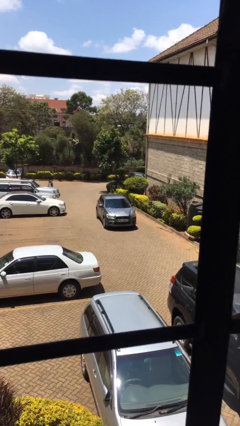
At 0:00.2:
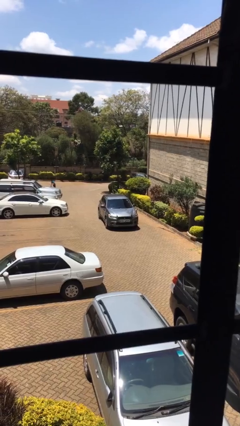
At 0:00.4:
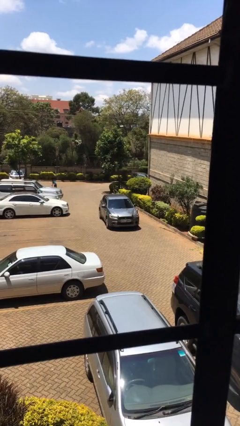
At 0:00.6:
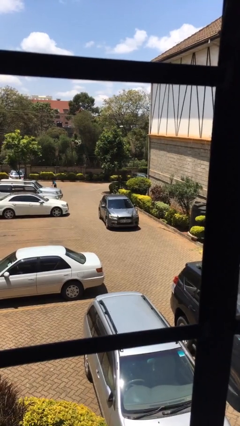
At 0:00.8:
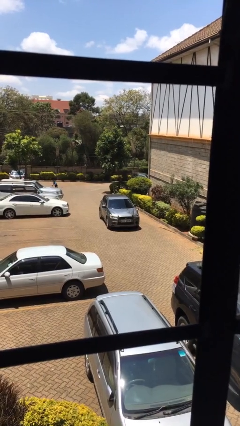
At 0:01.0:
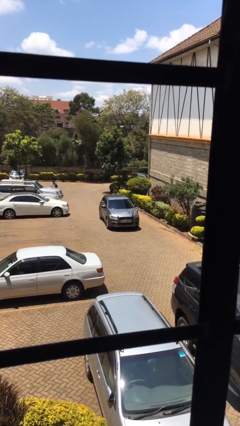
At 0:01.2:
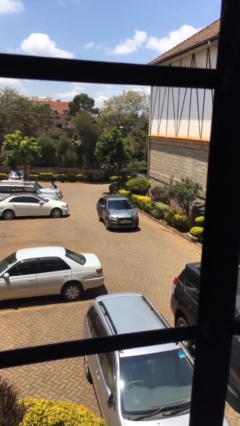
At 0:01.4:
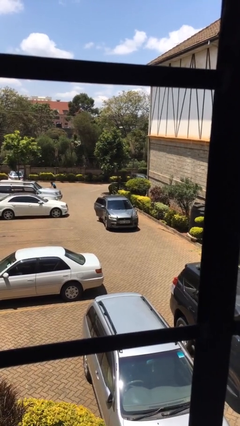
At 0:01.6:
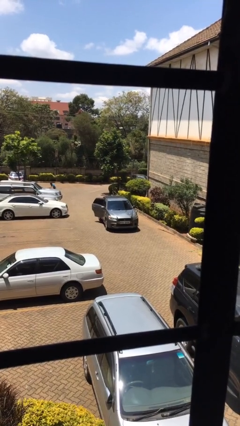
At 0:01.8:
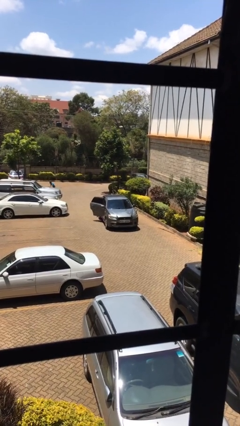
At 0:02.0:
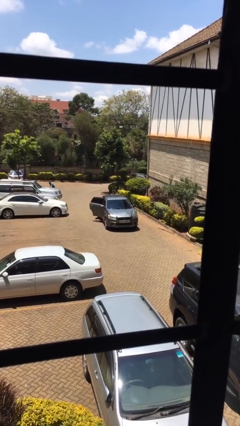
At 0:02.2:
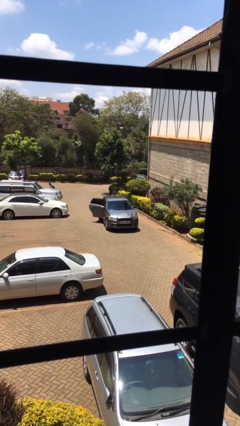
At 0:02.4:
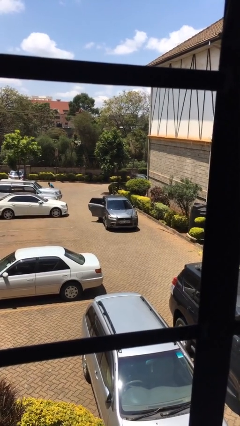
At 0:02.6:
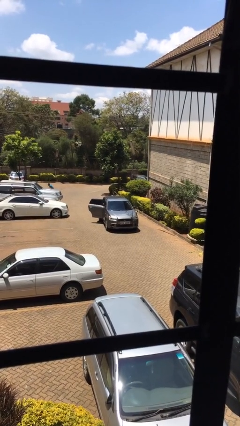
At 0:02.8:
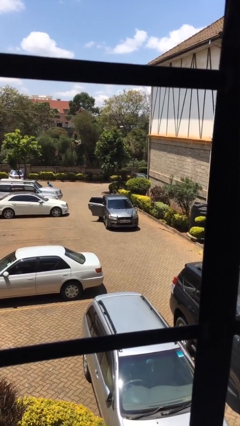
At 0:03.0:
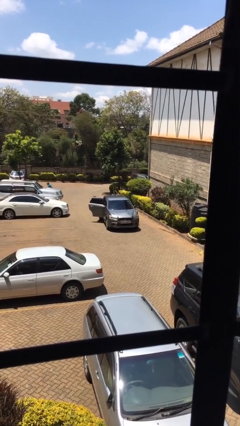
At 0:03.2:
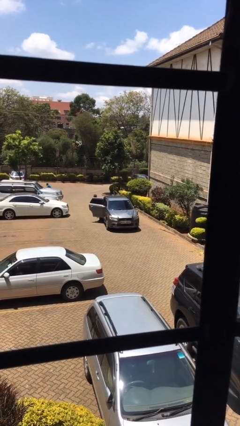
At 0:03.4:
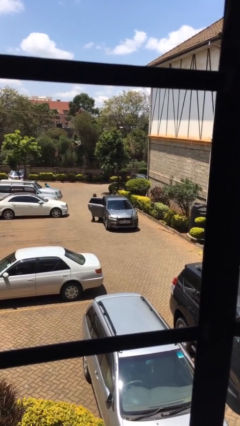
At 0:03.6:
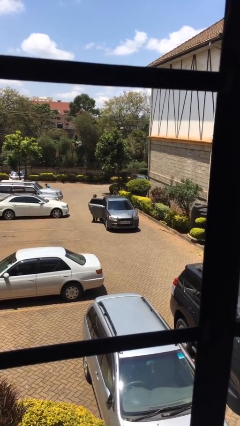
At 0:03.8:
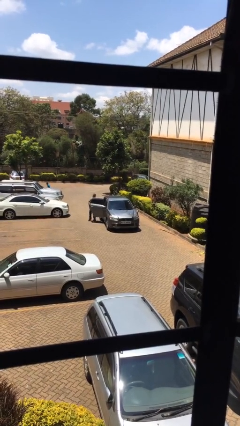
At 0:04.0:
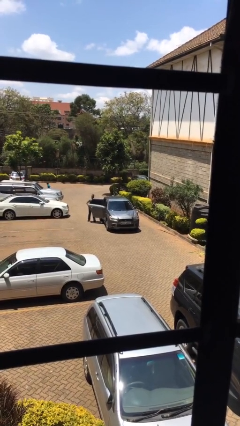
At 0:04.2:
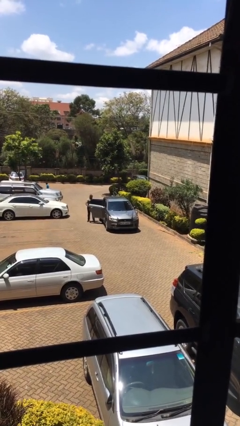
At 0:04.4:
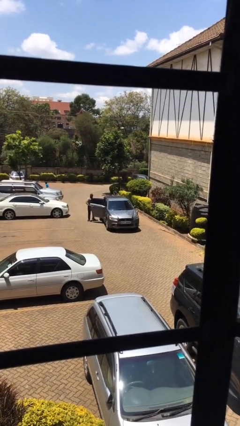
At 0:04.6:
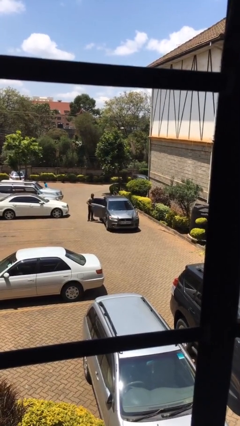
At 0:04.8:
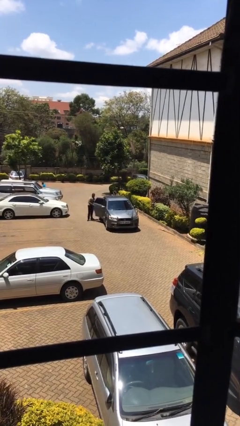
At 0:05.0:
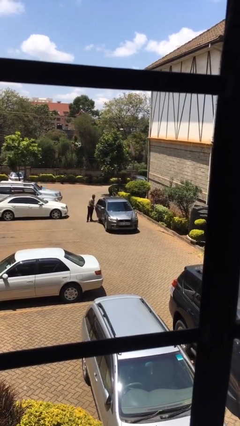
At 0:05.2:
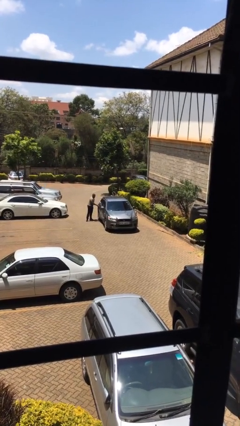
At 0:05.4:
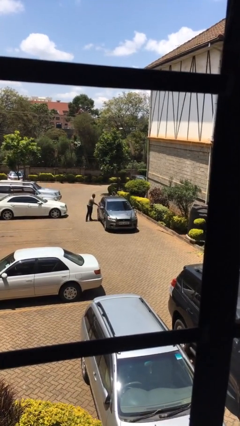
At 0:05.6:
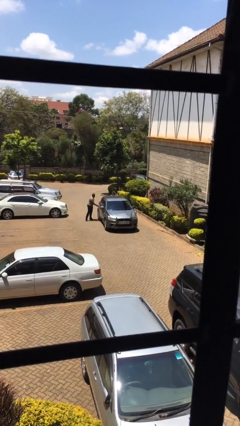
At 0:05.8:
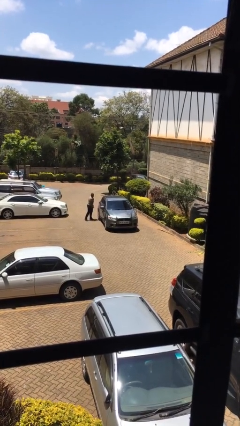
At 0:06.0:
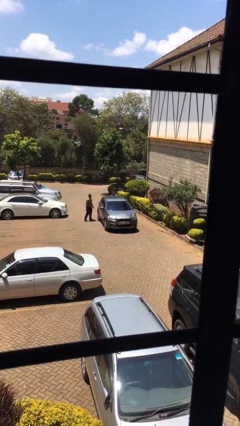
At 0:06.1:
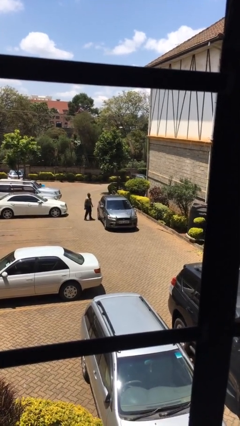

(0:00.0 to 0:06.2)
car drops off person

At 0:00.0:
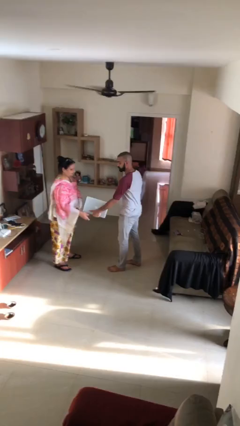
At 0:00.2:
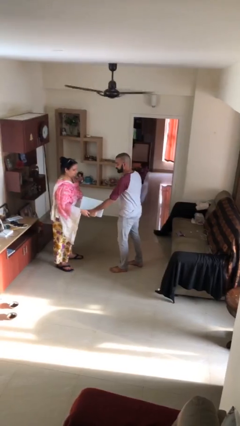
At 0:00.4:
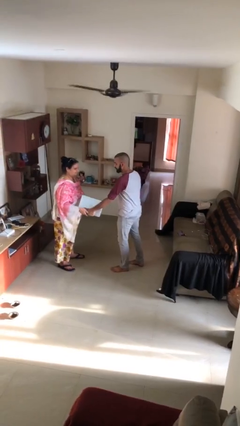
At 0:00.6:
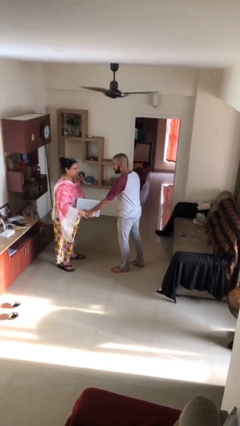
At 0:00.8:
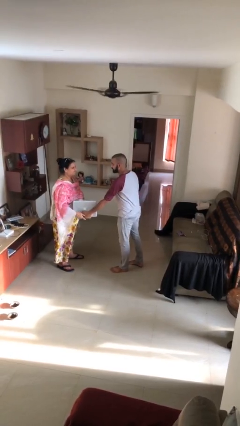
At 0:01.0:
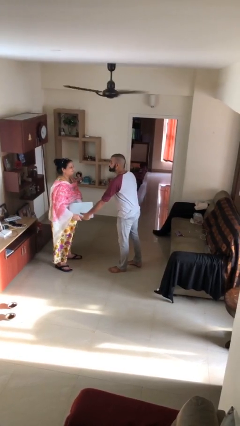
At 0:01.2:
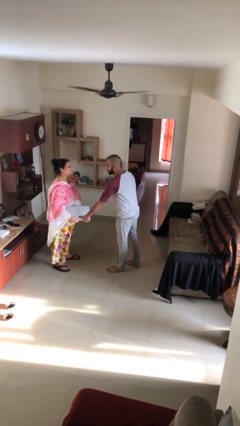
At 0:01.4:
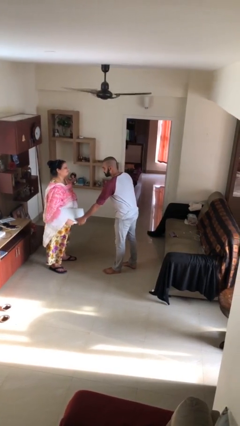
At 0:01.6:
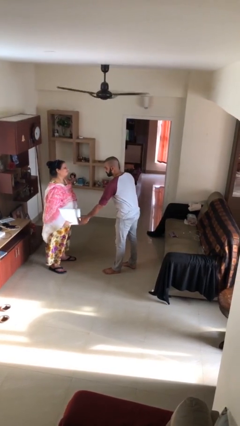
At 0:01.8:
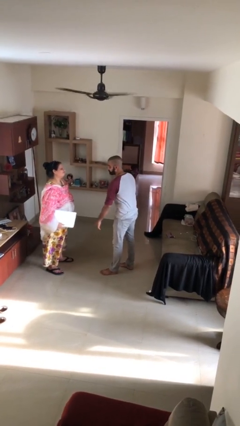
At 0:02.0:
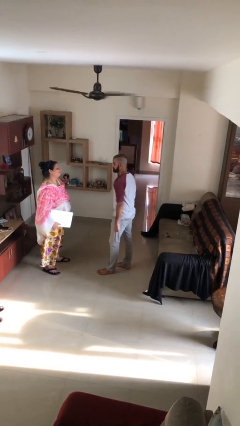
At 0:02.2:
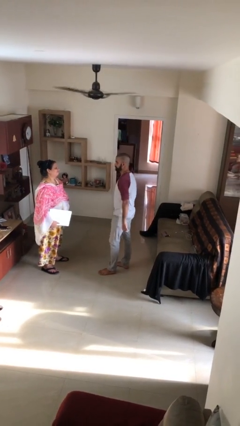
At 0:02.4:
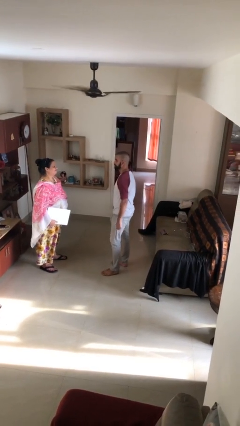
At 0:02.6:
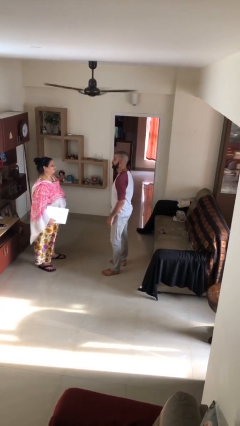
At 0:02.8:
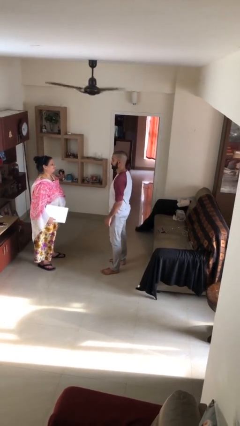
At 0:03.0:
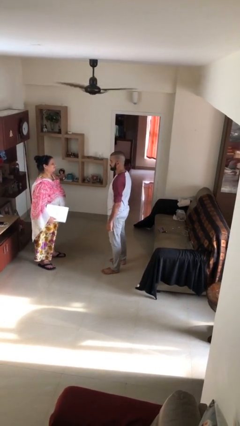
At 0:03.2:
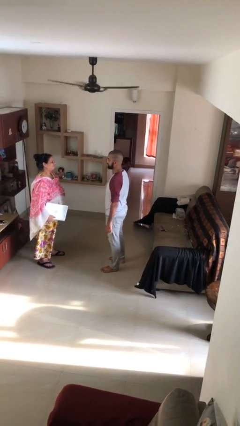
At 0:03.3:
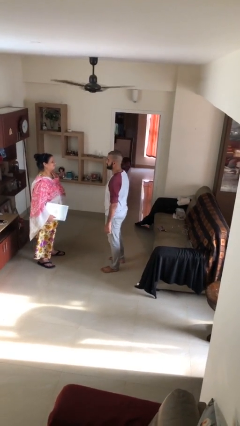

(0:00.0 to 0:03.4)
person transfers object to person

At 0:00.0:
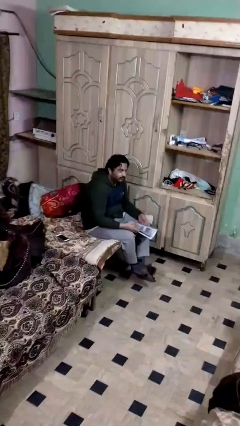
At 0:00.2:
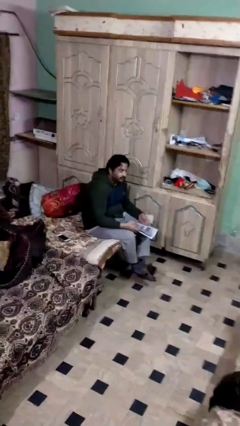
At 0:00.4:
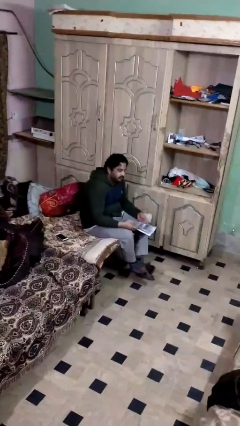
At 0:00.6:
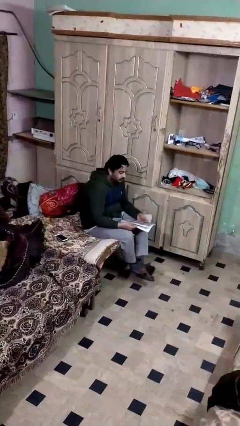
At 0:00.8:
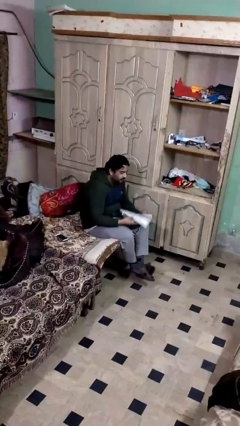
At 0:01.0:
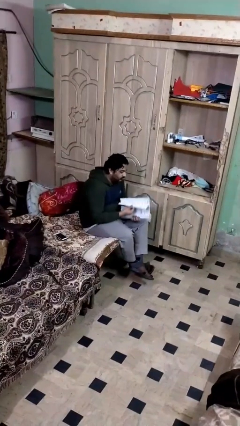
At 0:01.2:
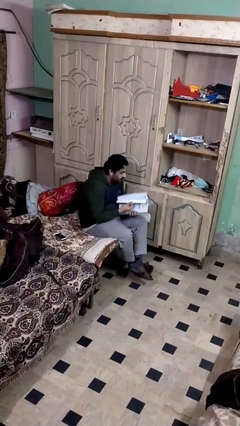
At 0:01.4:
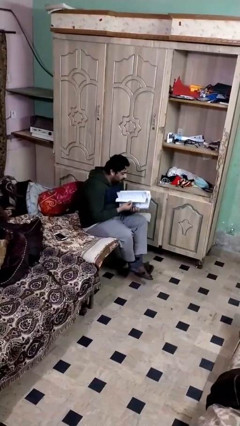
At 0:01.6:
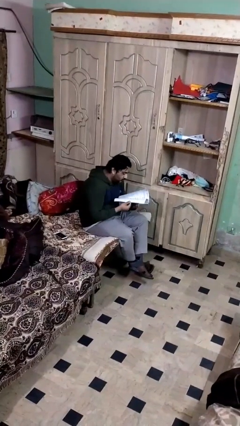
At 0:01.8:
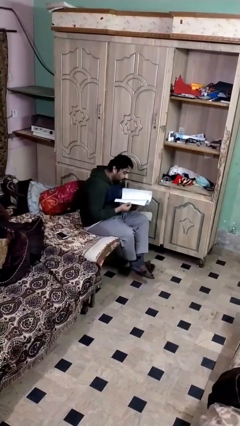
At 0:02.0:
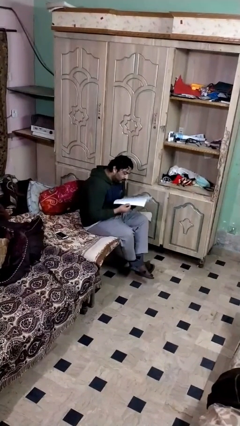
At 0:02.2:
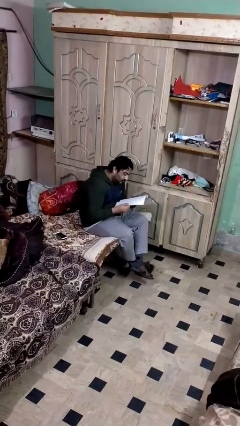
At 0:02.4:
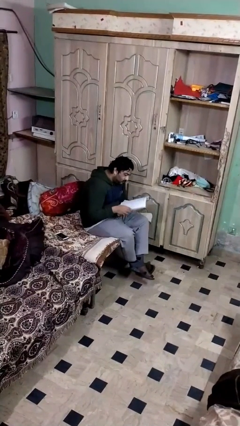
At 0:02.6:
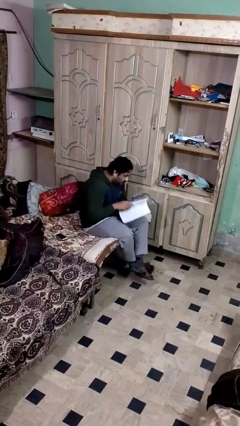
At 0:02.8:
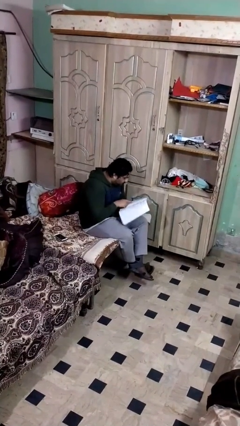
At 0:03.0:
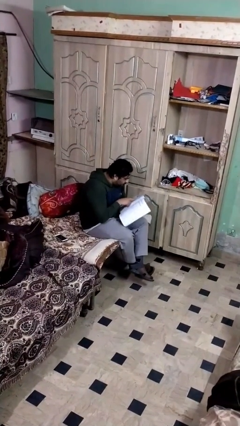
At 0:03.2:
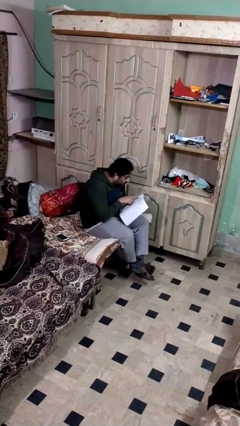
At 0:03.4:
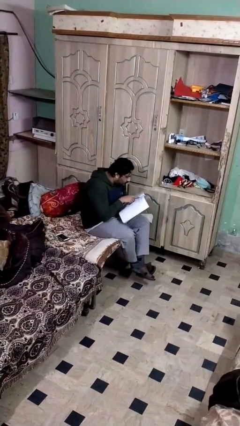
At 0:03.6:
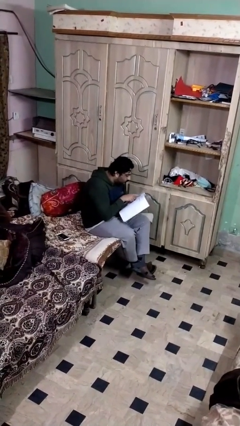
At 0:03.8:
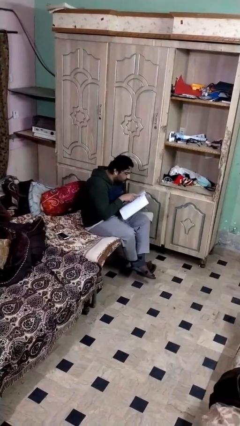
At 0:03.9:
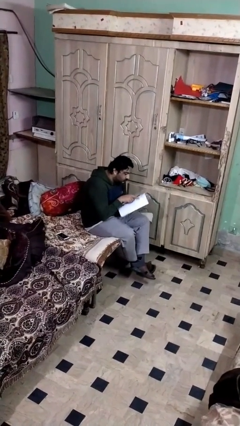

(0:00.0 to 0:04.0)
person reads document

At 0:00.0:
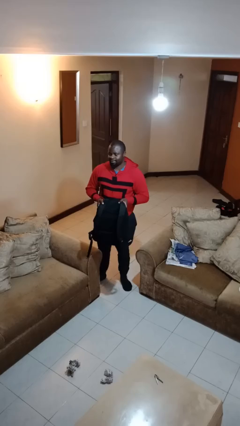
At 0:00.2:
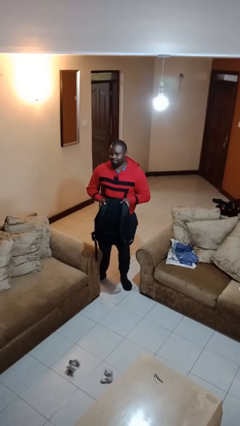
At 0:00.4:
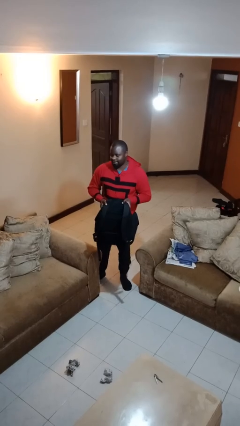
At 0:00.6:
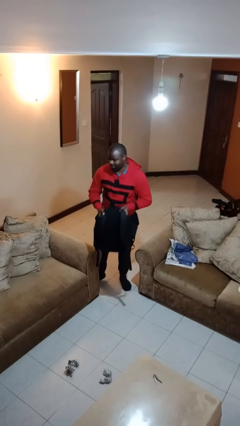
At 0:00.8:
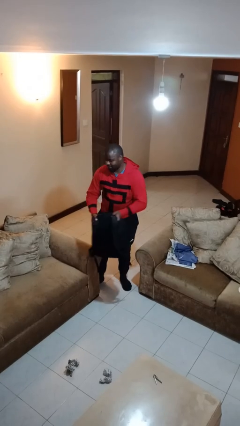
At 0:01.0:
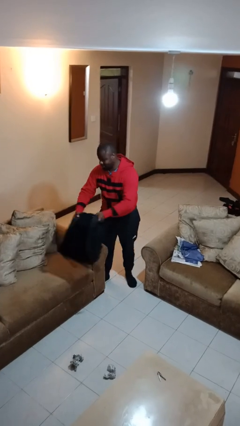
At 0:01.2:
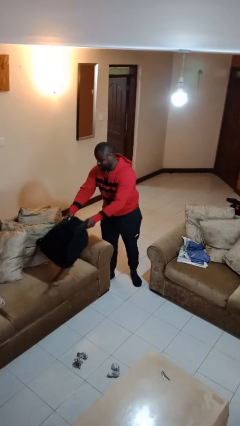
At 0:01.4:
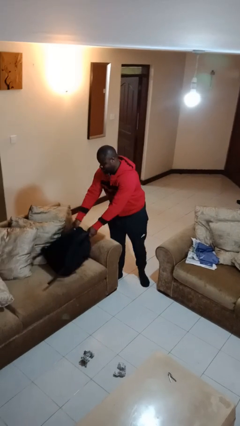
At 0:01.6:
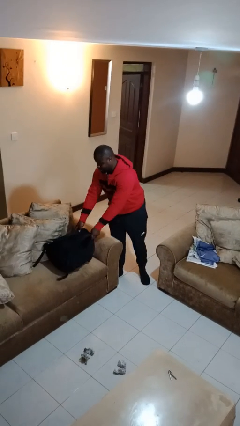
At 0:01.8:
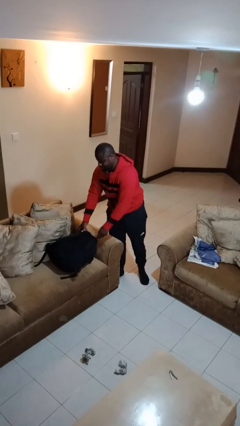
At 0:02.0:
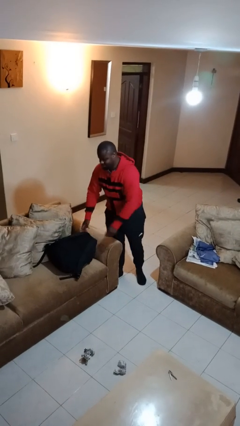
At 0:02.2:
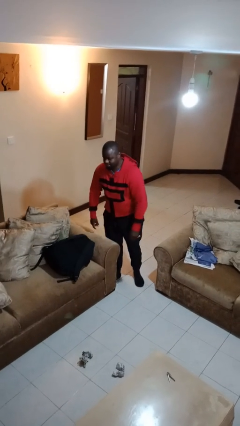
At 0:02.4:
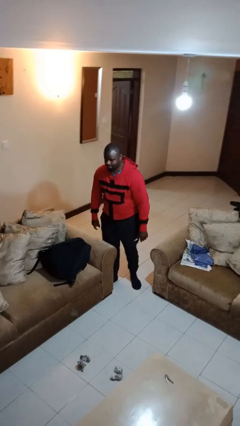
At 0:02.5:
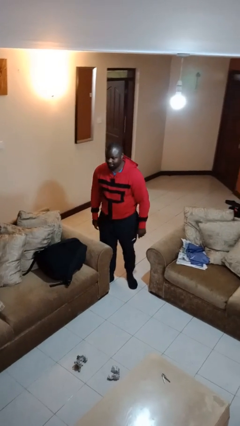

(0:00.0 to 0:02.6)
person puts down object on couch

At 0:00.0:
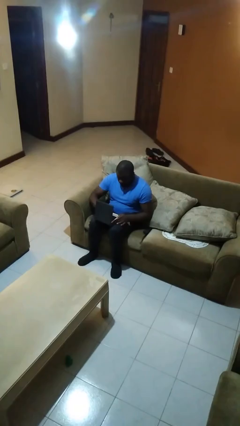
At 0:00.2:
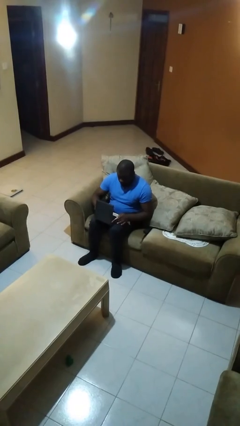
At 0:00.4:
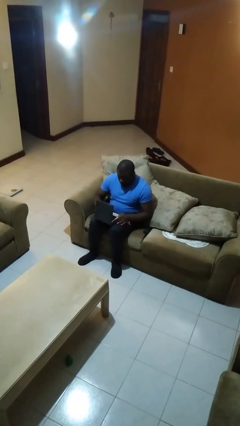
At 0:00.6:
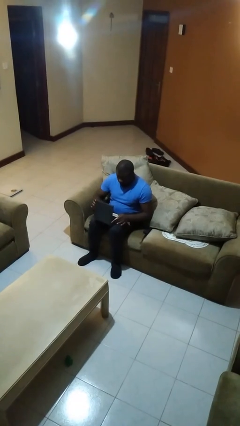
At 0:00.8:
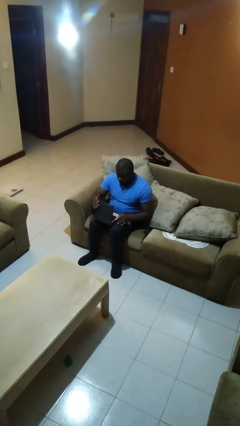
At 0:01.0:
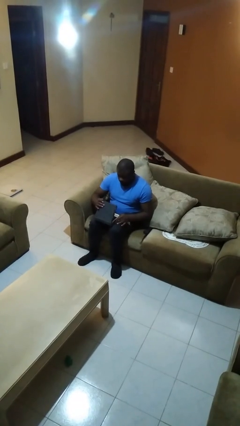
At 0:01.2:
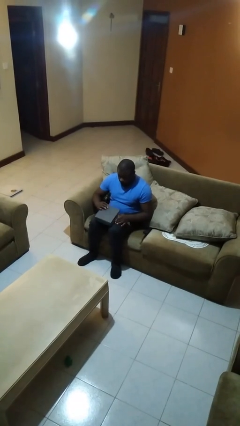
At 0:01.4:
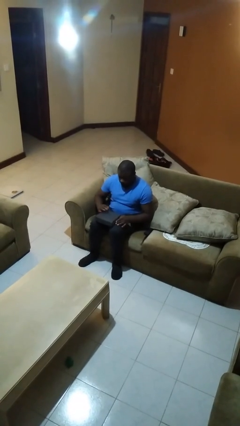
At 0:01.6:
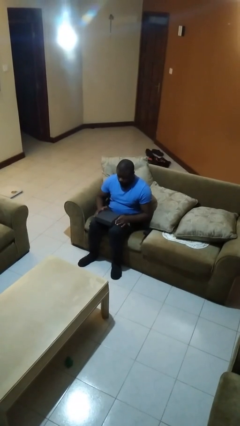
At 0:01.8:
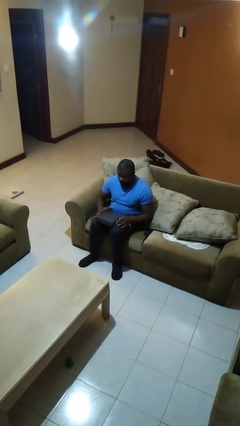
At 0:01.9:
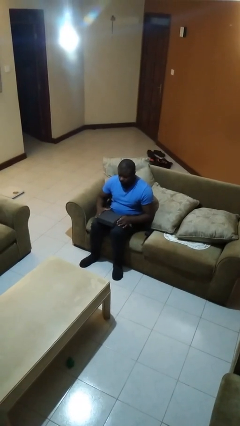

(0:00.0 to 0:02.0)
person closes jewelry box
